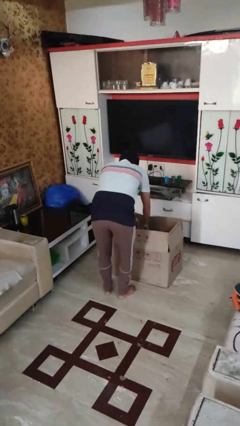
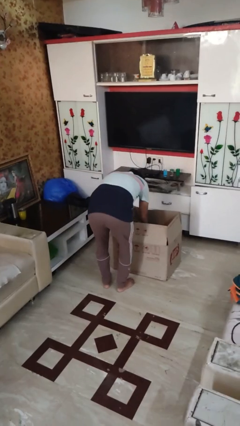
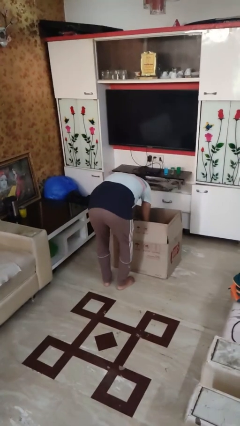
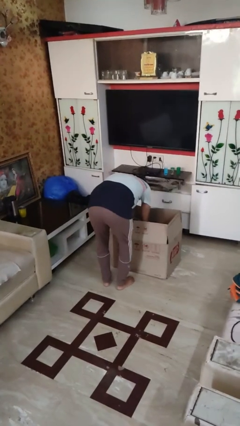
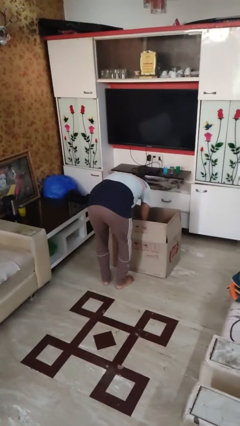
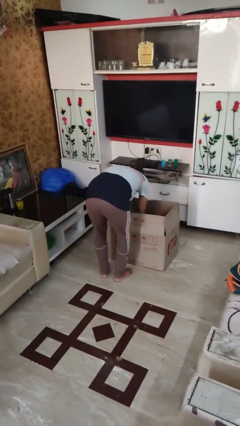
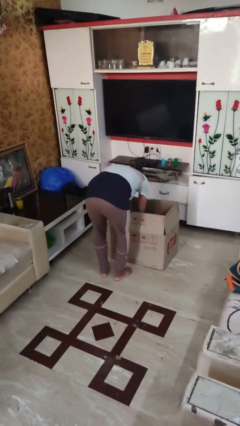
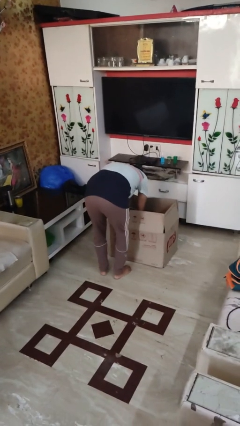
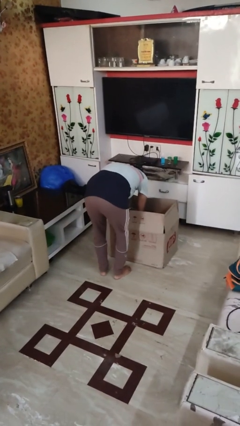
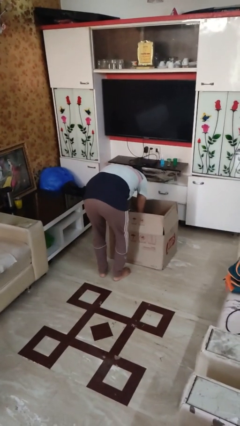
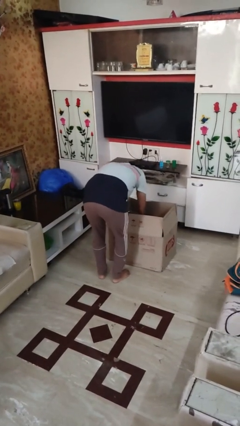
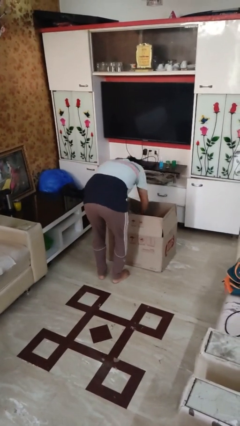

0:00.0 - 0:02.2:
person searches in box

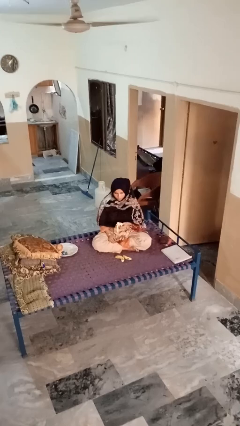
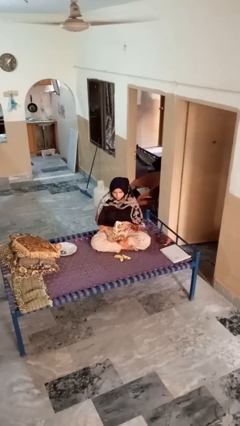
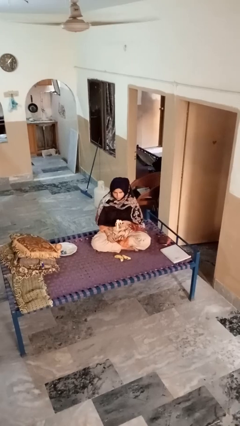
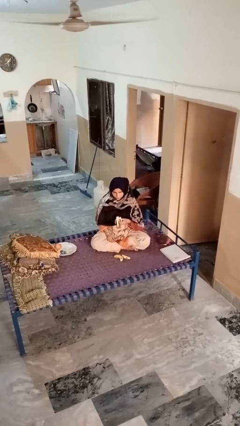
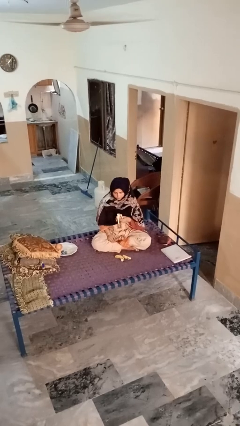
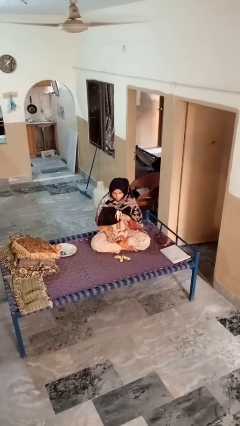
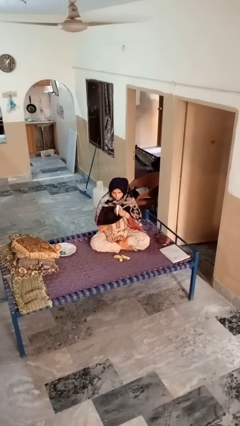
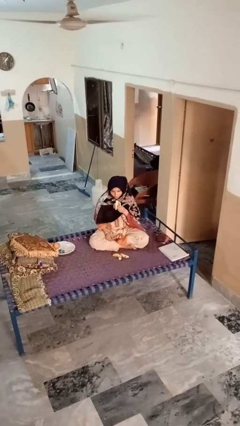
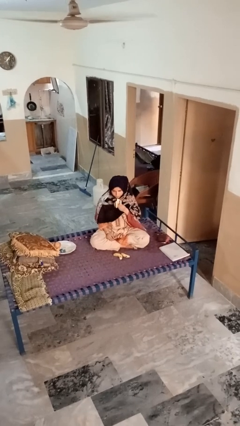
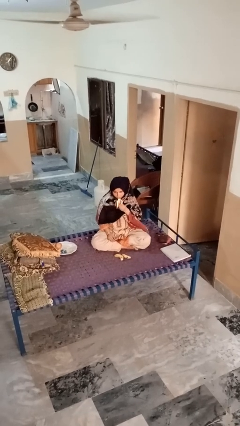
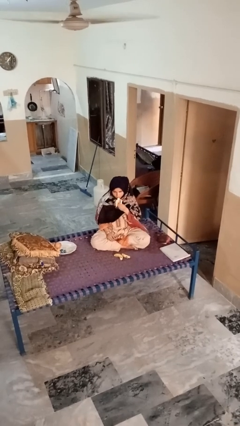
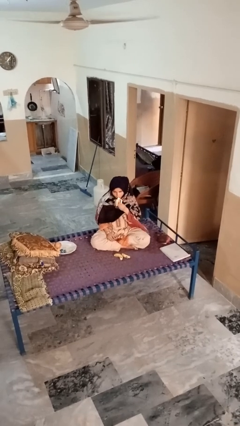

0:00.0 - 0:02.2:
person eats banana

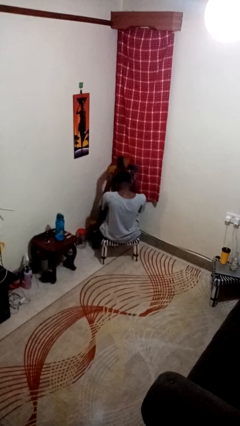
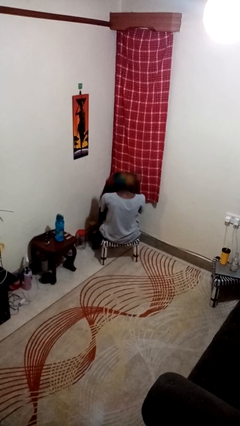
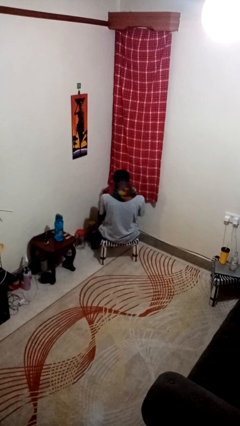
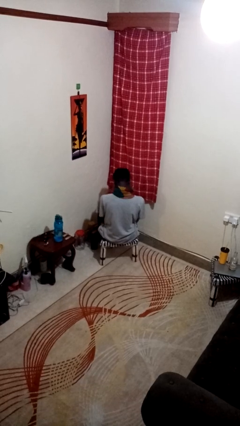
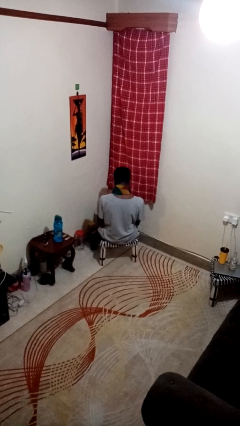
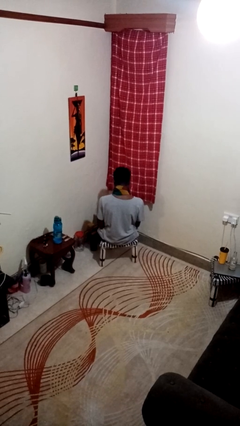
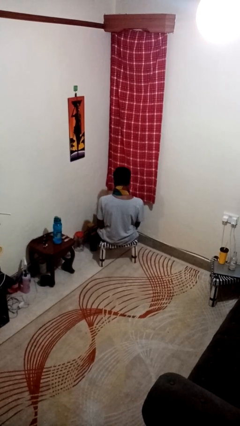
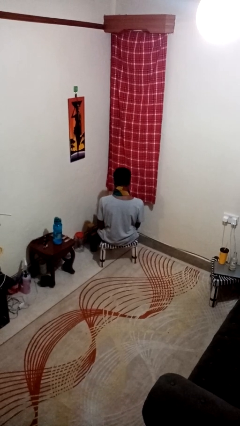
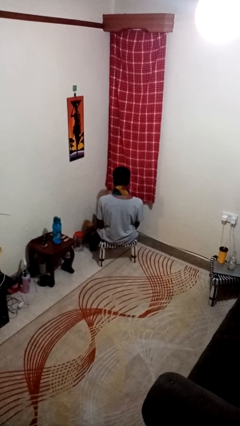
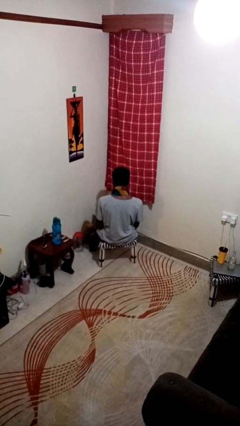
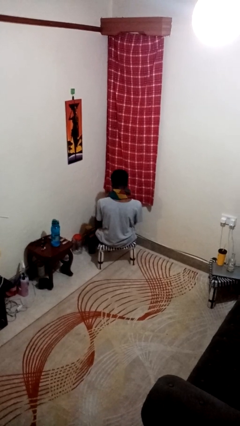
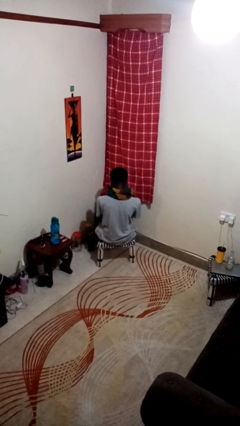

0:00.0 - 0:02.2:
person puts on scarf

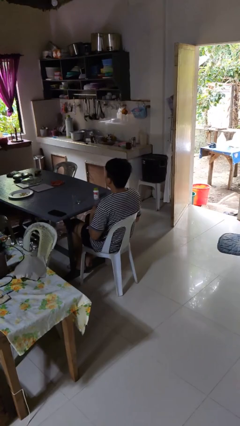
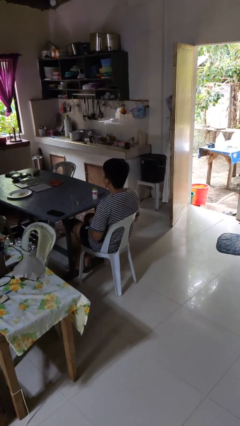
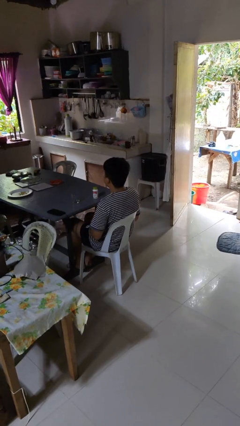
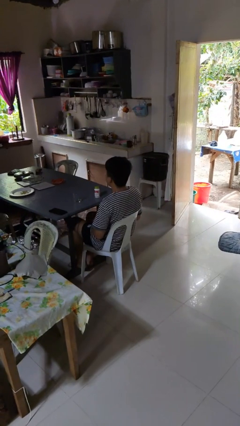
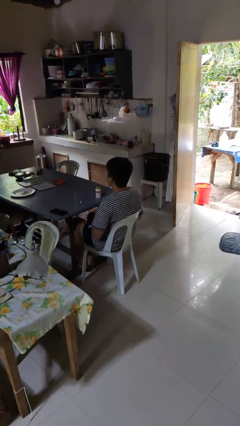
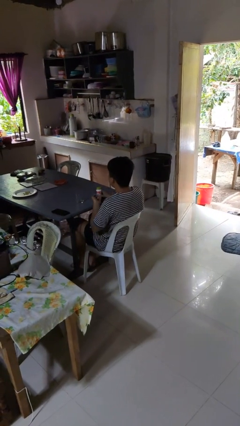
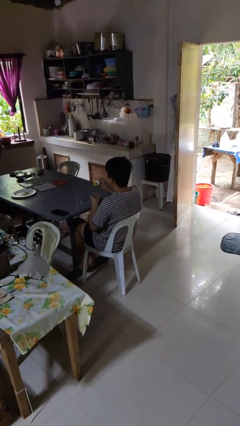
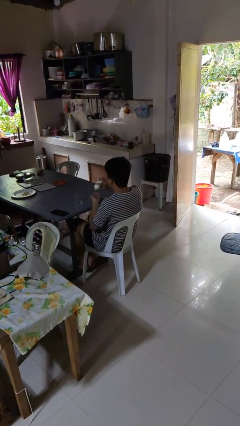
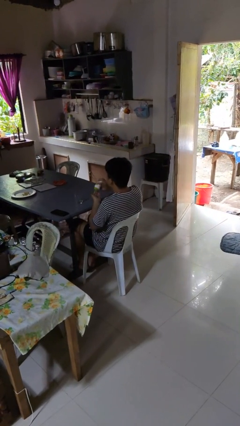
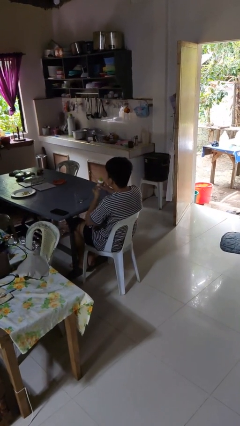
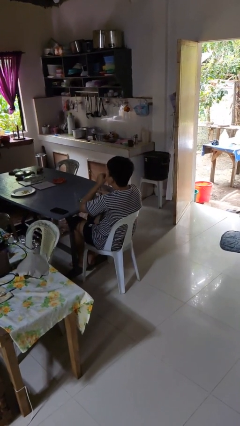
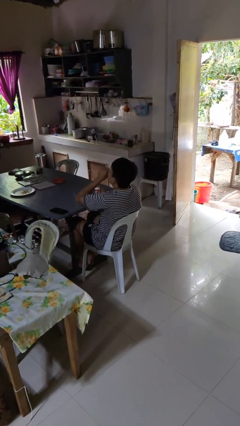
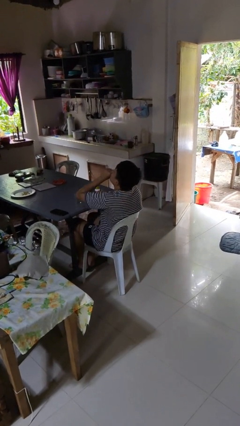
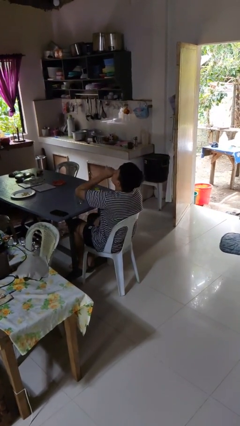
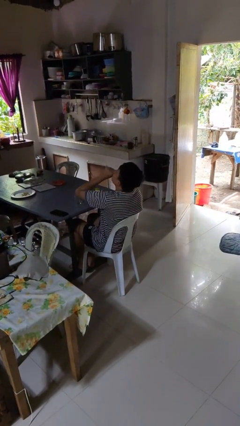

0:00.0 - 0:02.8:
person takes medicine pills

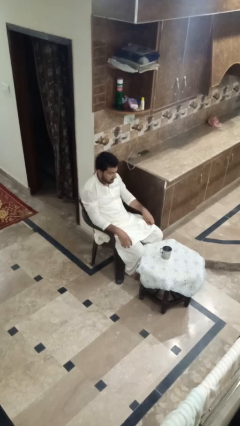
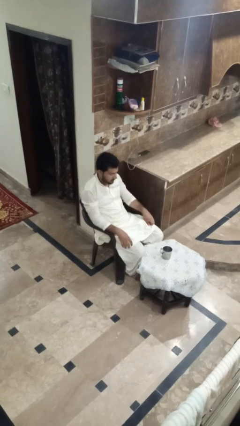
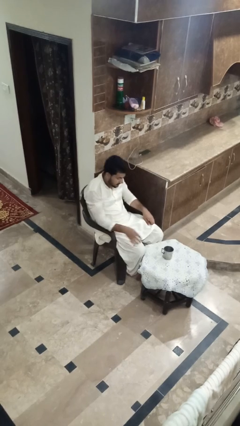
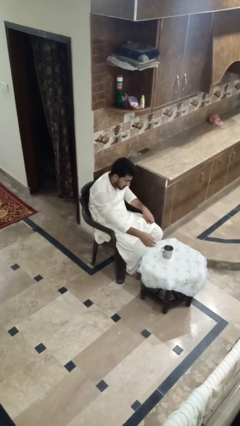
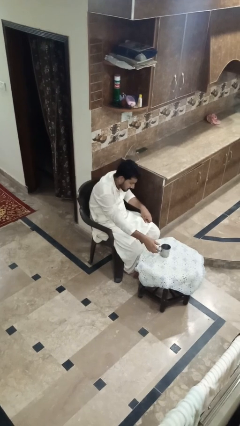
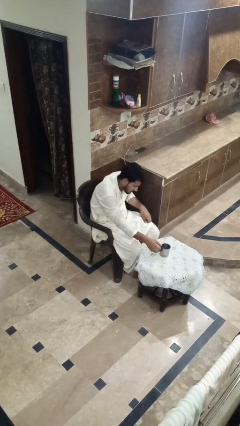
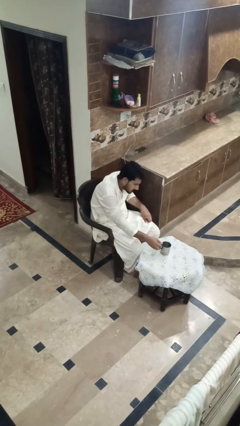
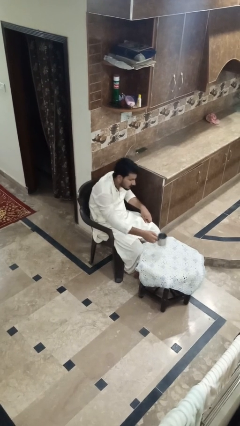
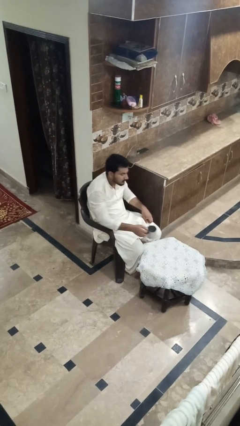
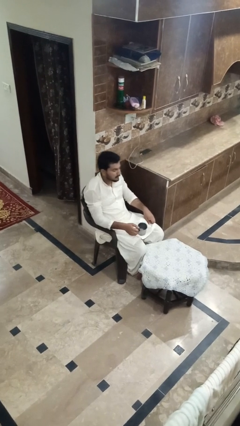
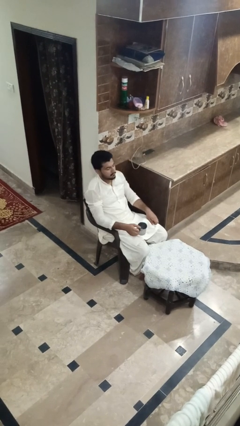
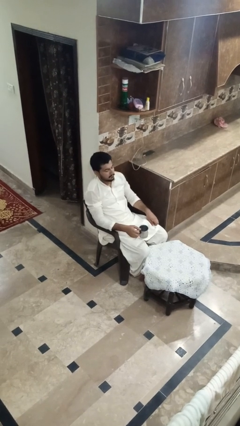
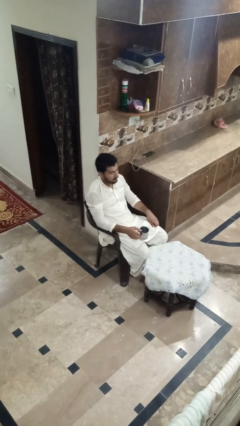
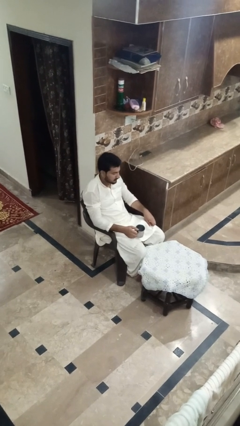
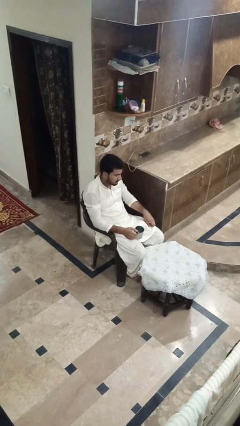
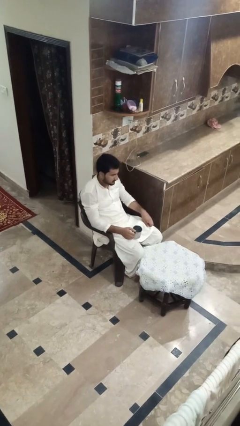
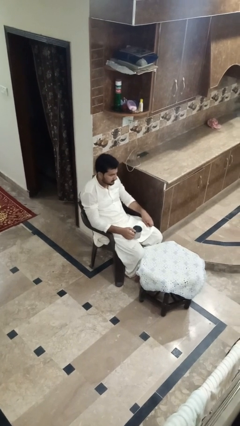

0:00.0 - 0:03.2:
person picks up object from table

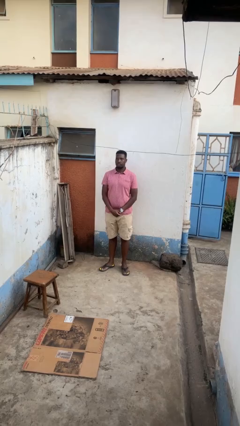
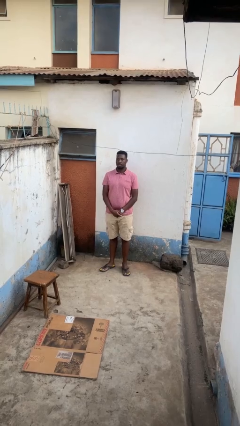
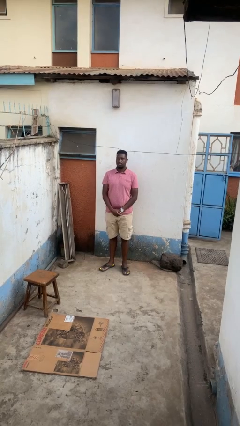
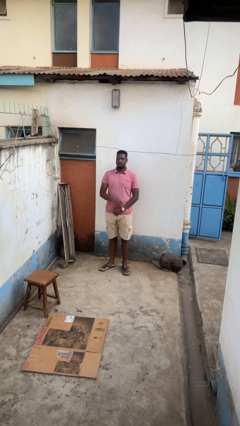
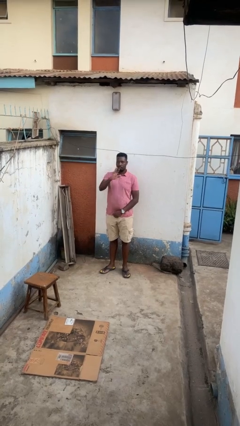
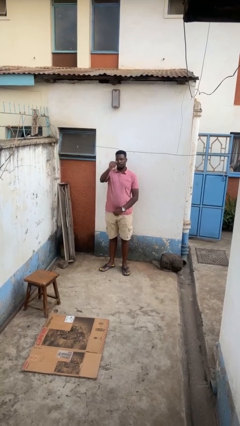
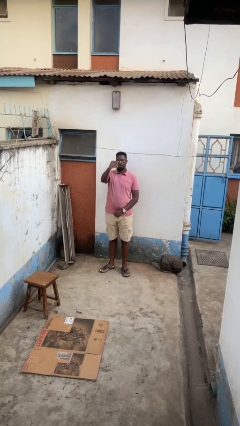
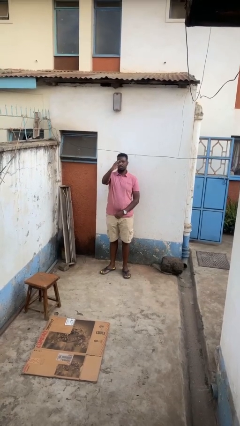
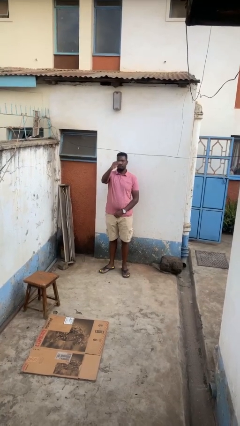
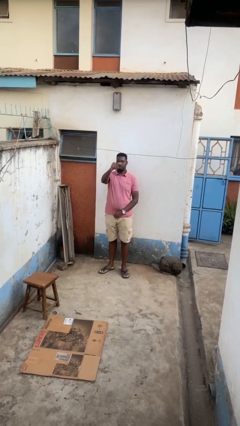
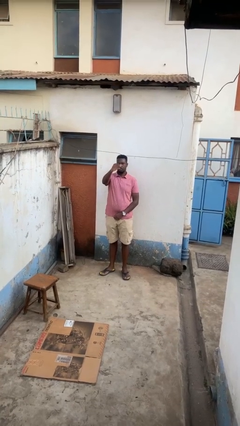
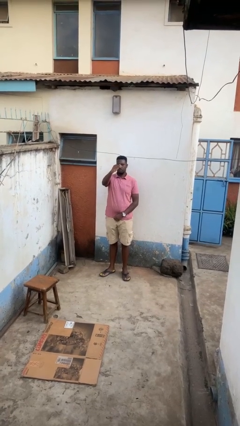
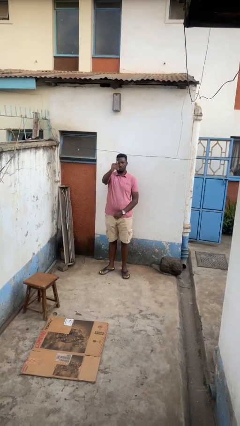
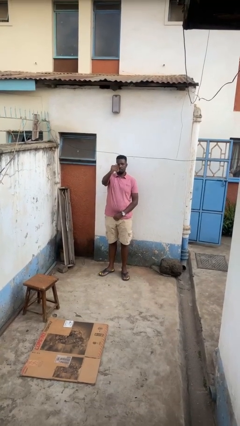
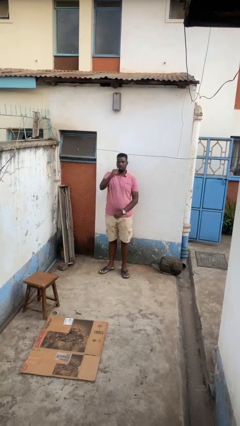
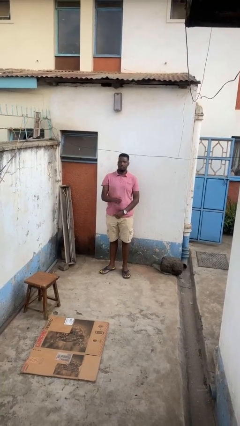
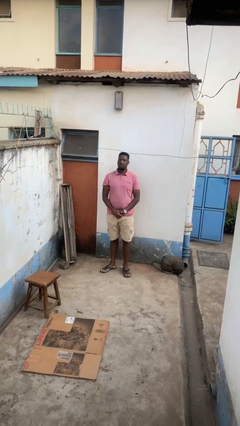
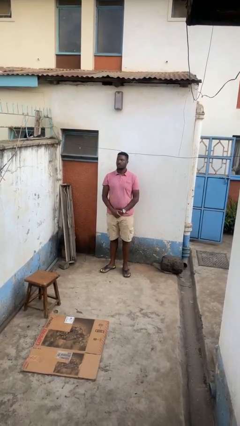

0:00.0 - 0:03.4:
person gestures come here

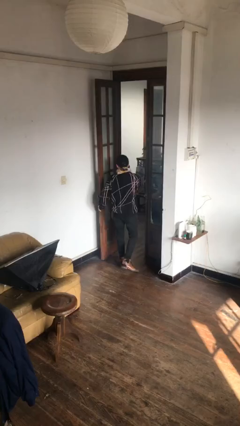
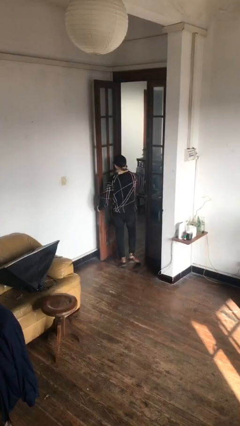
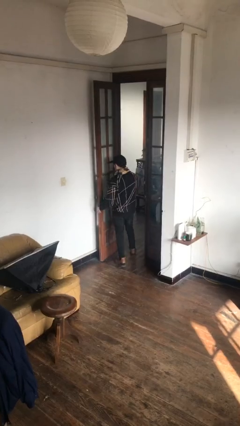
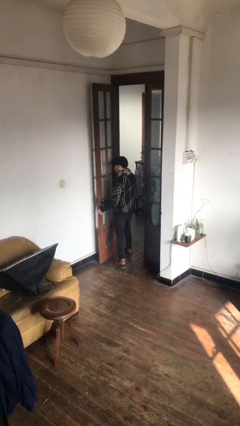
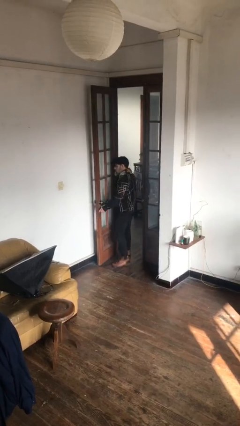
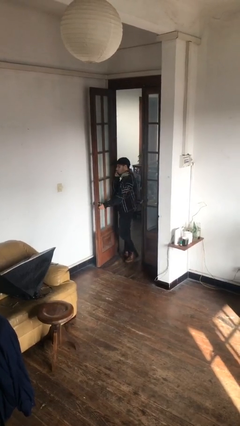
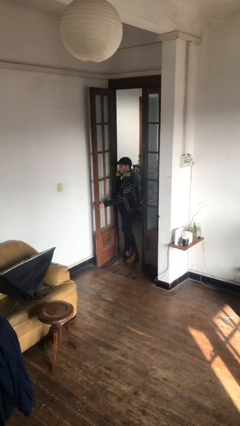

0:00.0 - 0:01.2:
person exits scene through structure
